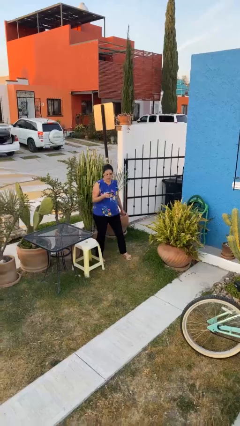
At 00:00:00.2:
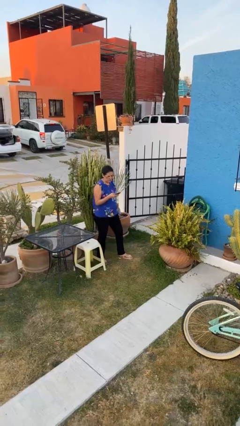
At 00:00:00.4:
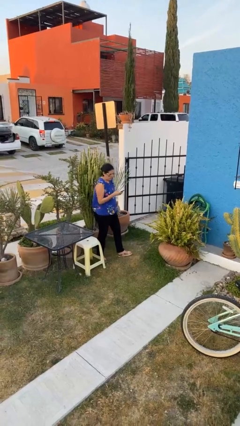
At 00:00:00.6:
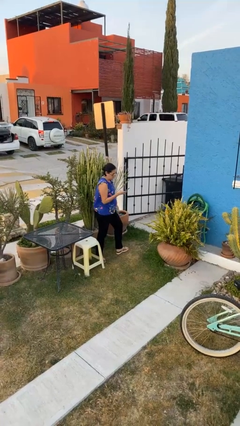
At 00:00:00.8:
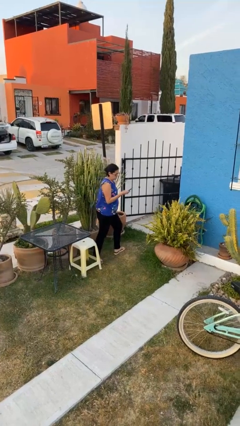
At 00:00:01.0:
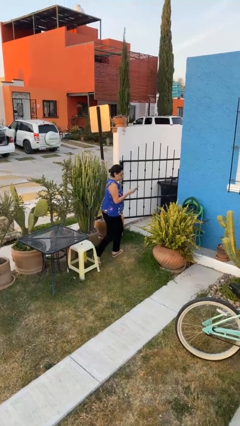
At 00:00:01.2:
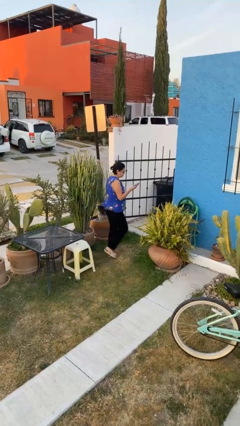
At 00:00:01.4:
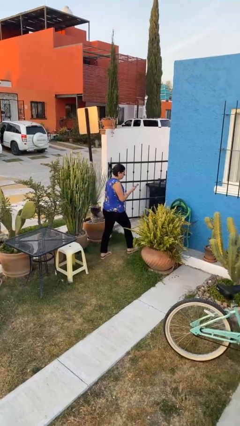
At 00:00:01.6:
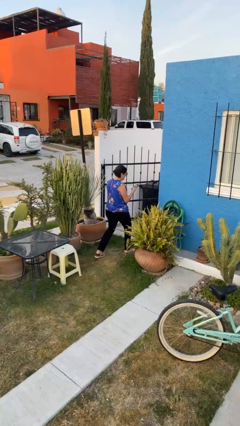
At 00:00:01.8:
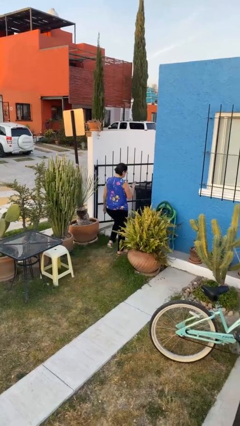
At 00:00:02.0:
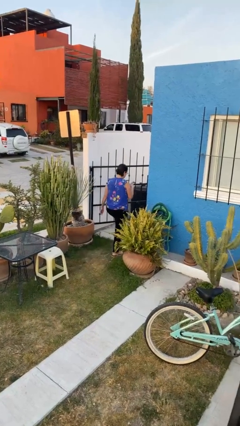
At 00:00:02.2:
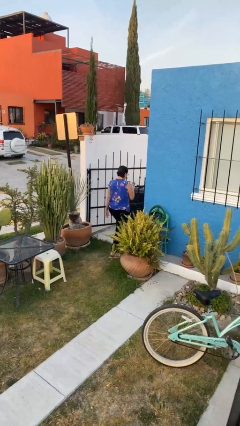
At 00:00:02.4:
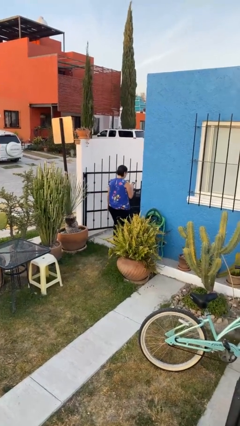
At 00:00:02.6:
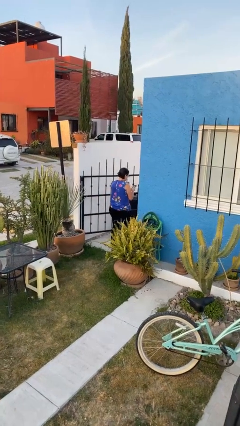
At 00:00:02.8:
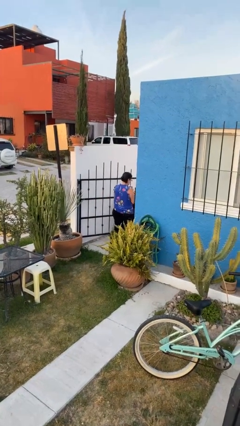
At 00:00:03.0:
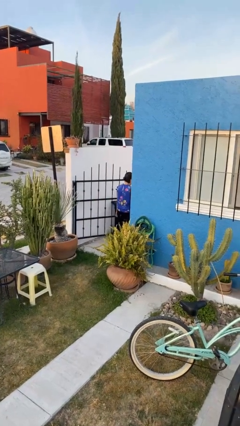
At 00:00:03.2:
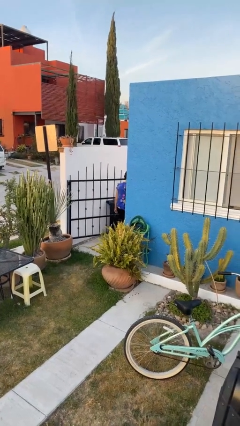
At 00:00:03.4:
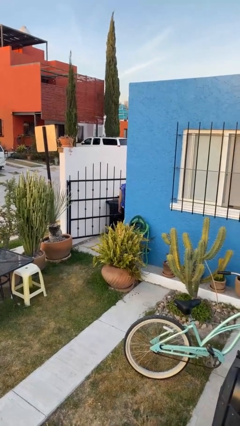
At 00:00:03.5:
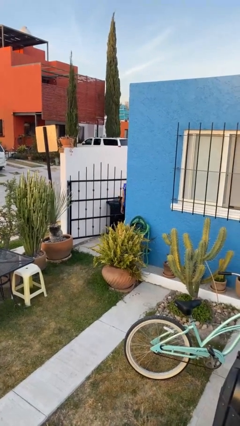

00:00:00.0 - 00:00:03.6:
person exits scene through structure

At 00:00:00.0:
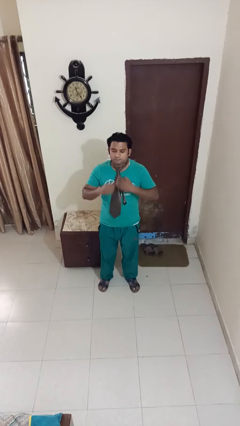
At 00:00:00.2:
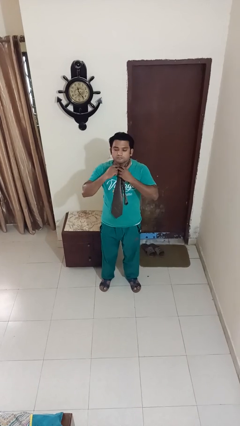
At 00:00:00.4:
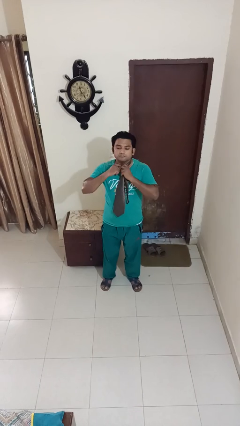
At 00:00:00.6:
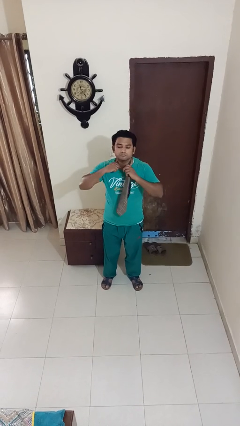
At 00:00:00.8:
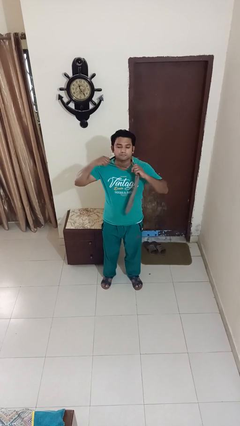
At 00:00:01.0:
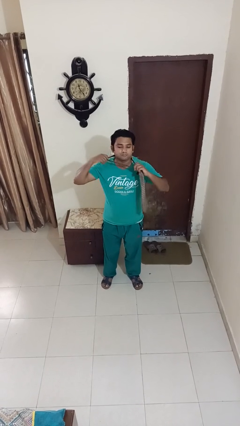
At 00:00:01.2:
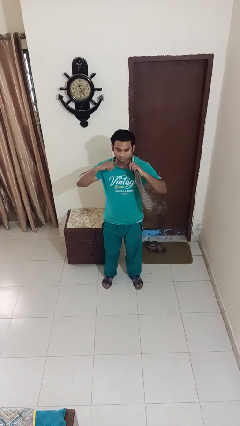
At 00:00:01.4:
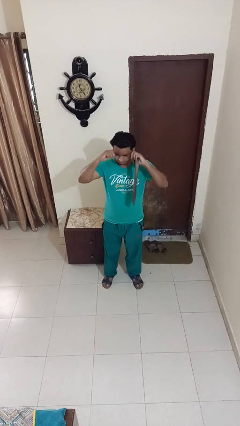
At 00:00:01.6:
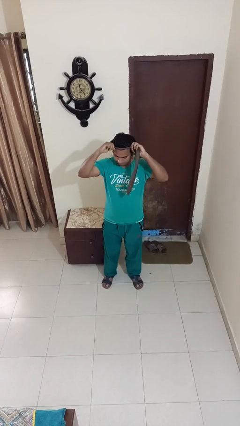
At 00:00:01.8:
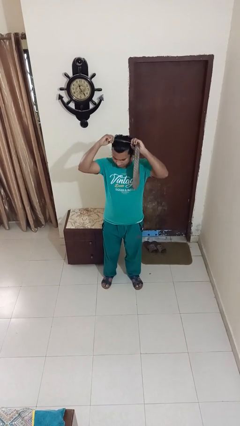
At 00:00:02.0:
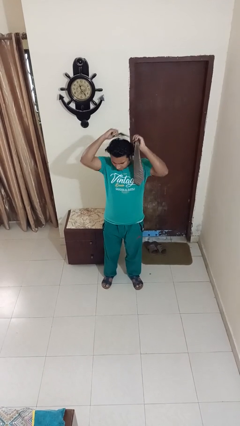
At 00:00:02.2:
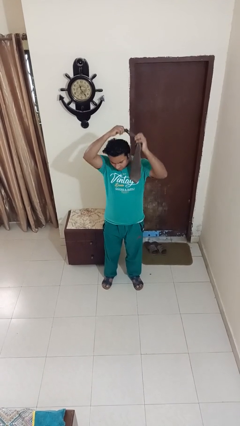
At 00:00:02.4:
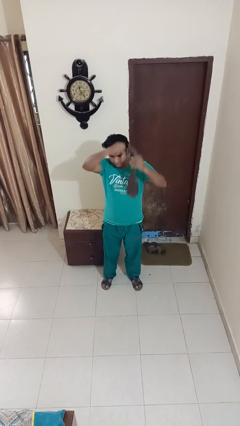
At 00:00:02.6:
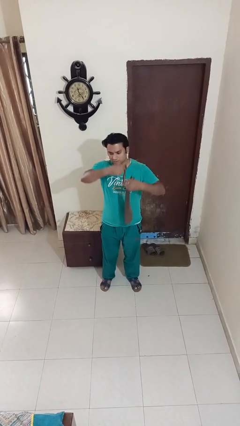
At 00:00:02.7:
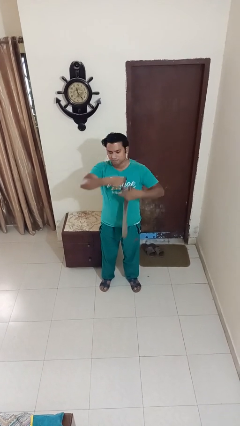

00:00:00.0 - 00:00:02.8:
person takes off necktie

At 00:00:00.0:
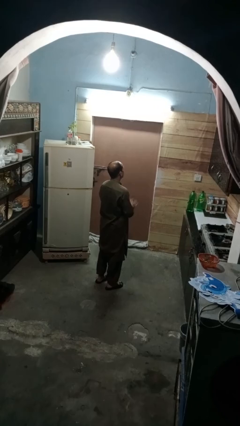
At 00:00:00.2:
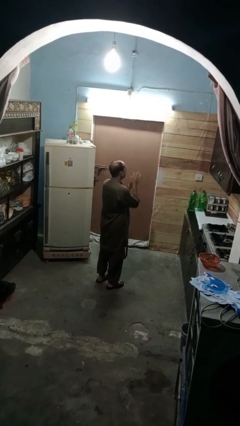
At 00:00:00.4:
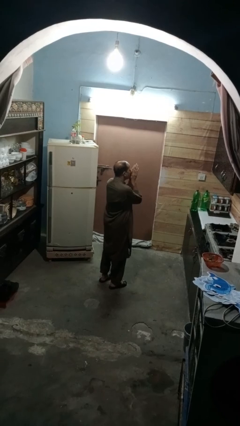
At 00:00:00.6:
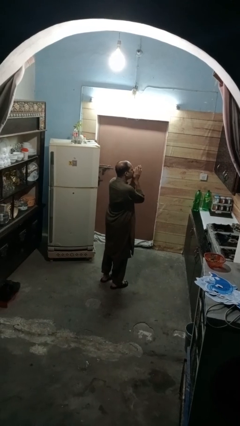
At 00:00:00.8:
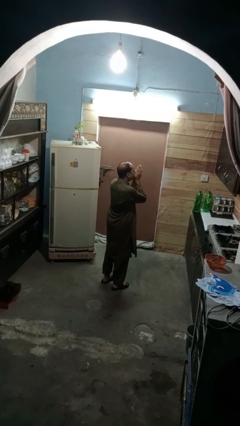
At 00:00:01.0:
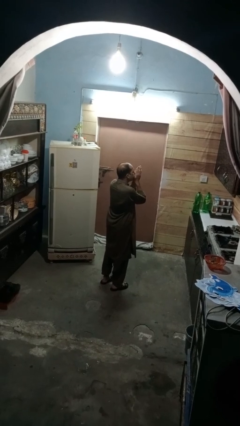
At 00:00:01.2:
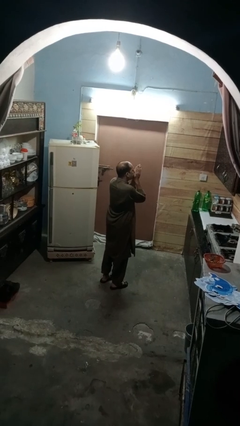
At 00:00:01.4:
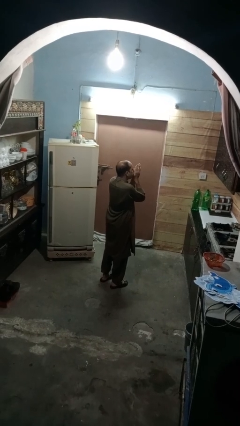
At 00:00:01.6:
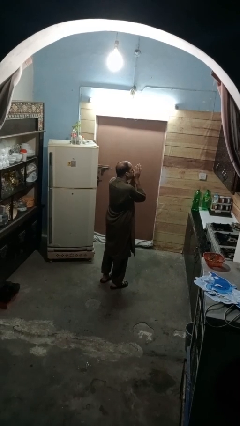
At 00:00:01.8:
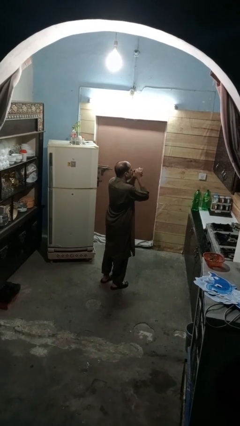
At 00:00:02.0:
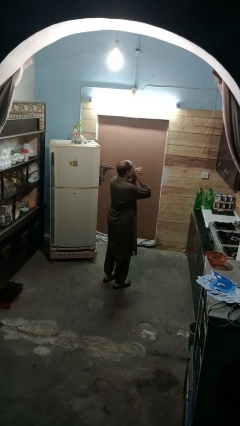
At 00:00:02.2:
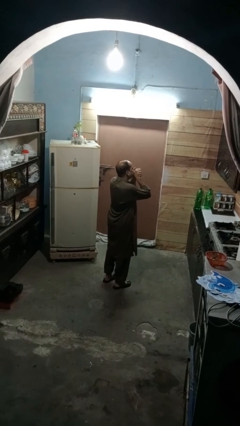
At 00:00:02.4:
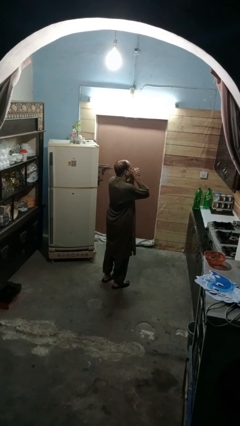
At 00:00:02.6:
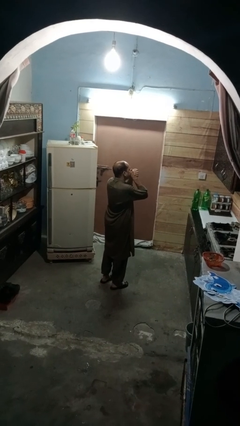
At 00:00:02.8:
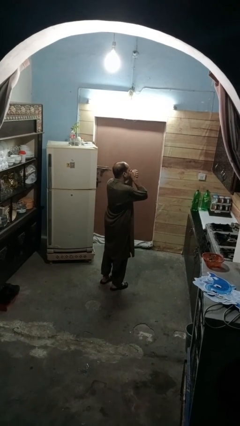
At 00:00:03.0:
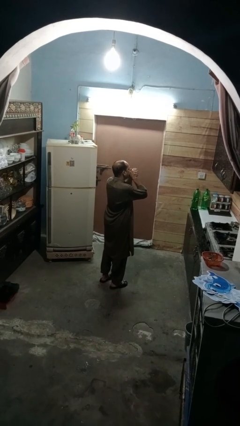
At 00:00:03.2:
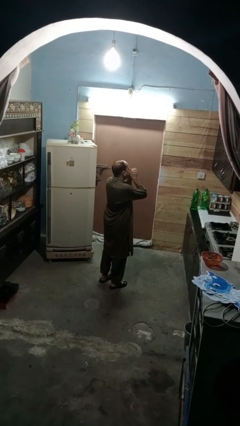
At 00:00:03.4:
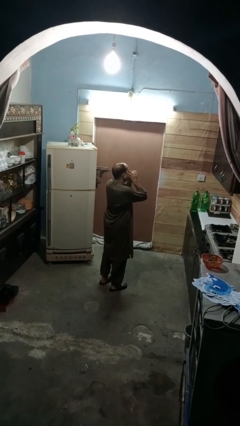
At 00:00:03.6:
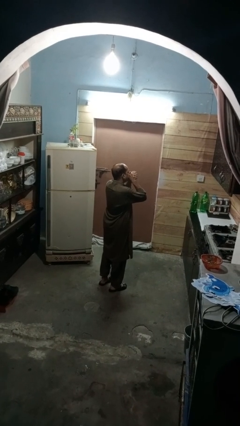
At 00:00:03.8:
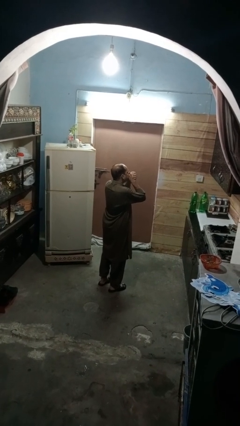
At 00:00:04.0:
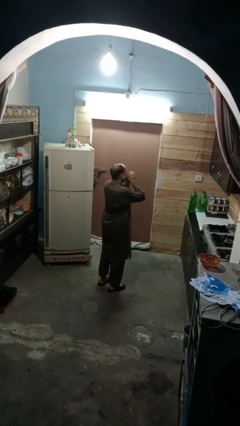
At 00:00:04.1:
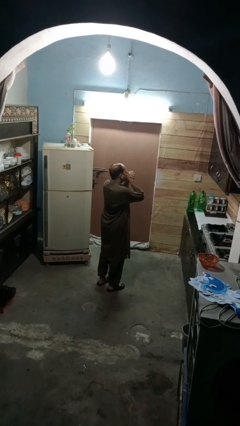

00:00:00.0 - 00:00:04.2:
person blows into hands

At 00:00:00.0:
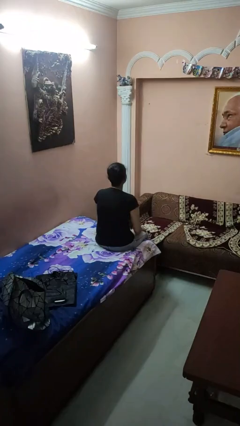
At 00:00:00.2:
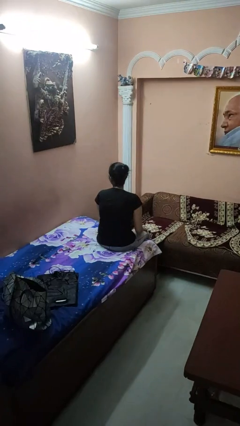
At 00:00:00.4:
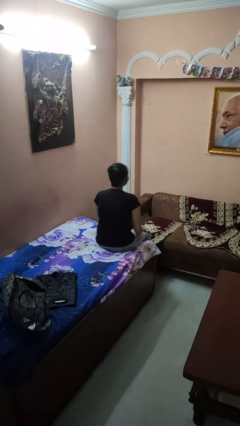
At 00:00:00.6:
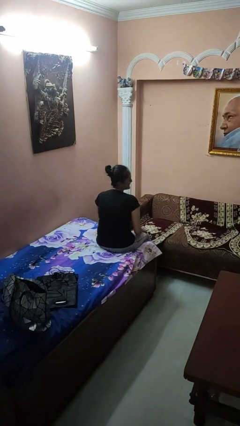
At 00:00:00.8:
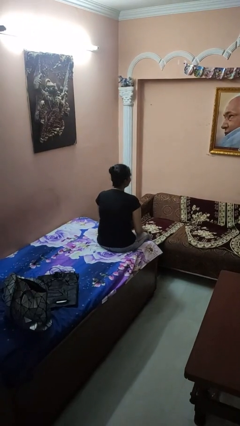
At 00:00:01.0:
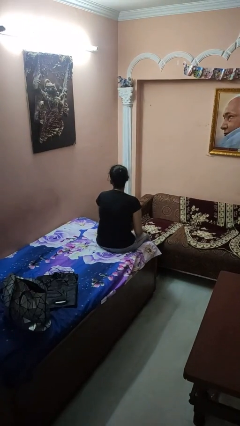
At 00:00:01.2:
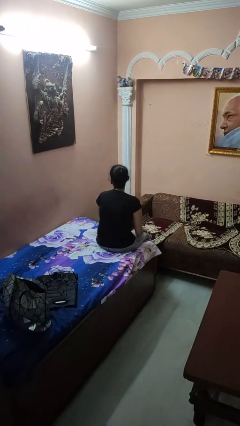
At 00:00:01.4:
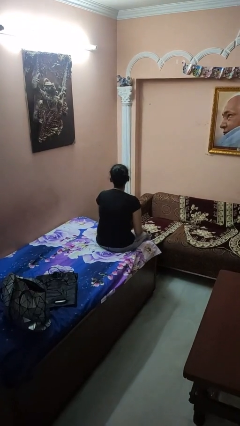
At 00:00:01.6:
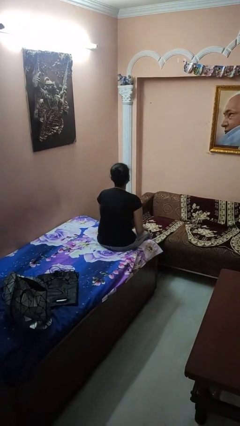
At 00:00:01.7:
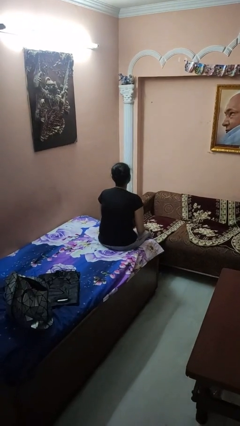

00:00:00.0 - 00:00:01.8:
person shakes head

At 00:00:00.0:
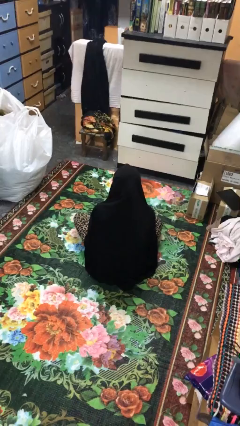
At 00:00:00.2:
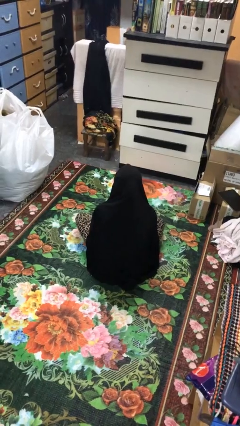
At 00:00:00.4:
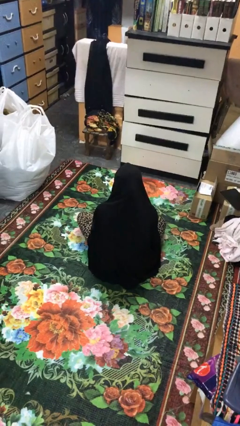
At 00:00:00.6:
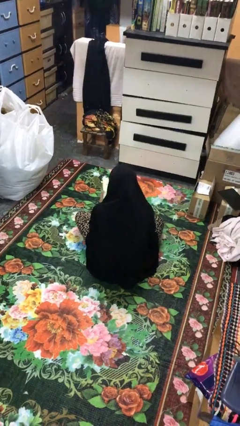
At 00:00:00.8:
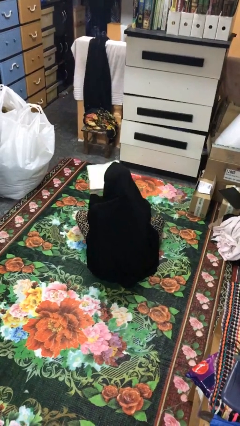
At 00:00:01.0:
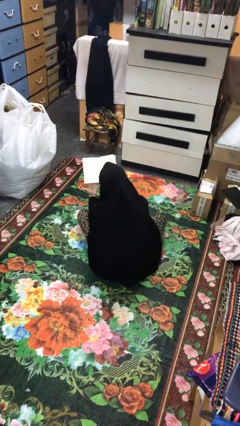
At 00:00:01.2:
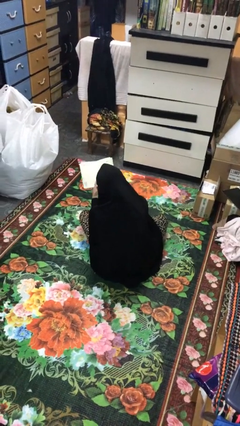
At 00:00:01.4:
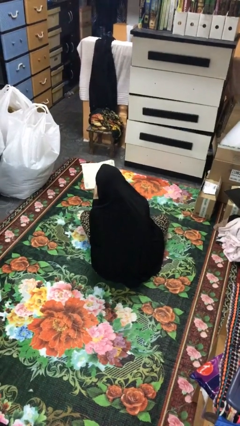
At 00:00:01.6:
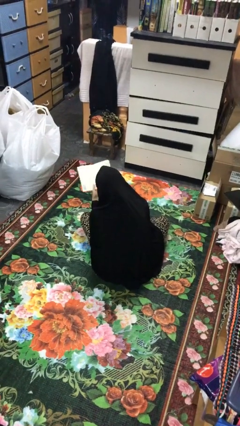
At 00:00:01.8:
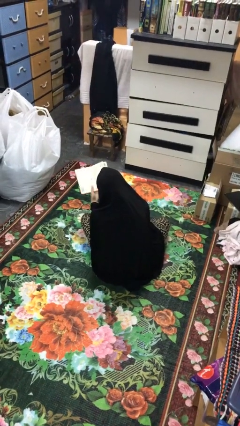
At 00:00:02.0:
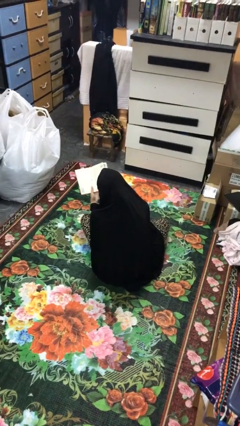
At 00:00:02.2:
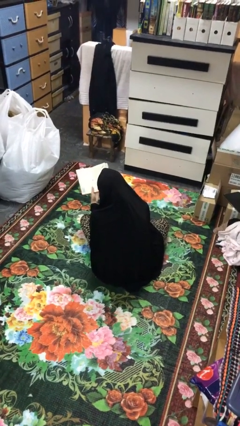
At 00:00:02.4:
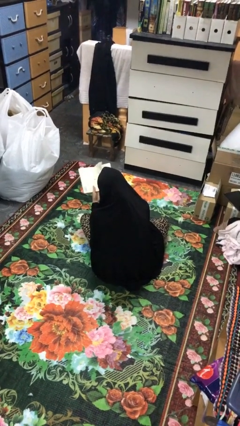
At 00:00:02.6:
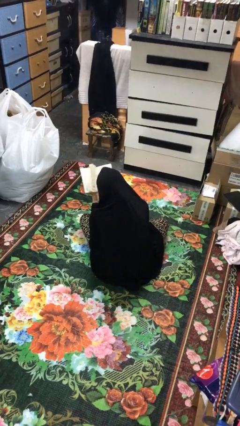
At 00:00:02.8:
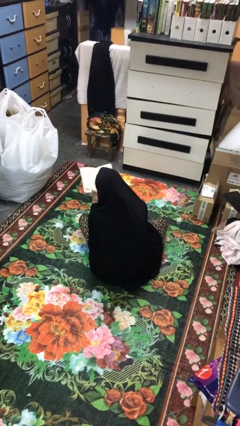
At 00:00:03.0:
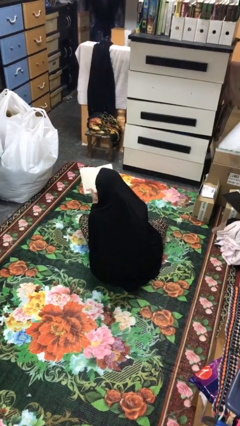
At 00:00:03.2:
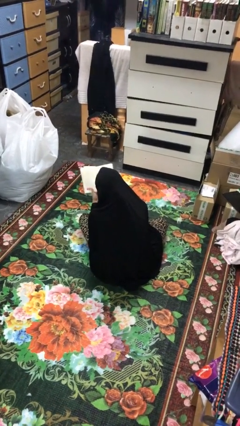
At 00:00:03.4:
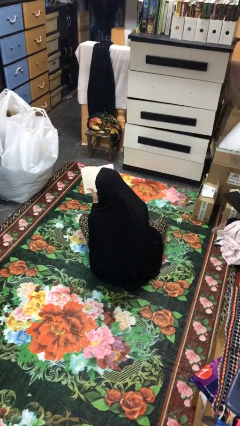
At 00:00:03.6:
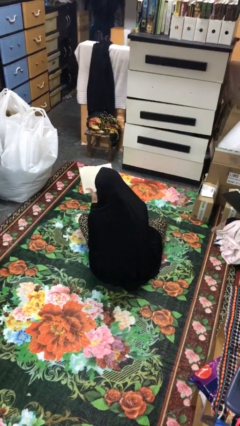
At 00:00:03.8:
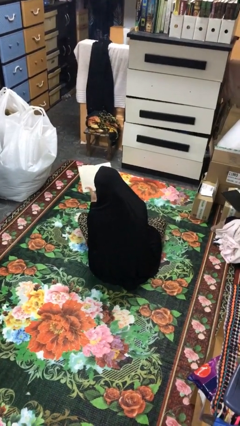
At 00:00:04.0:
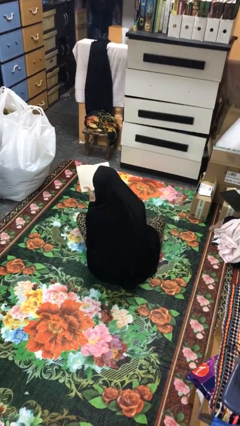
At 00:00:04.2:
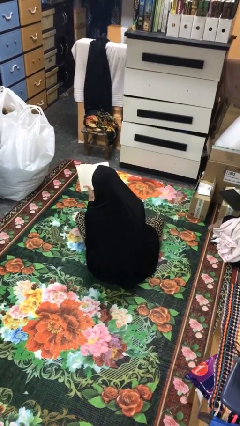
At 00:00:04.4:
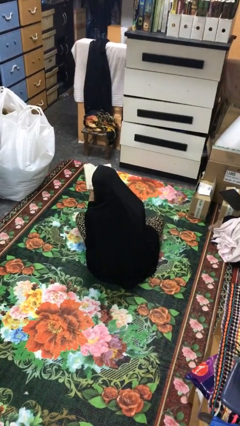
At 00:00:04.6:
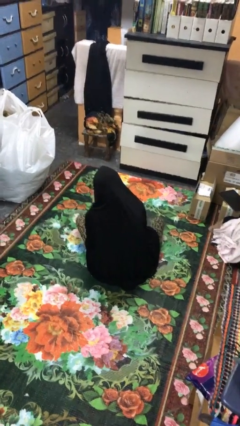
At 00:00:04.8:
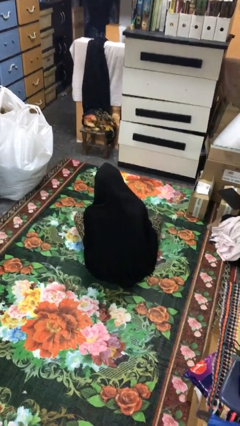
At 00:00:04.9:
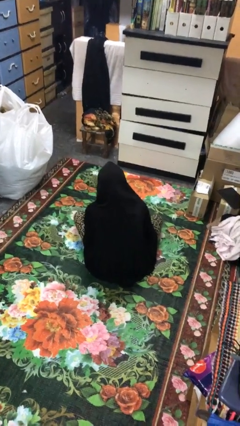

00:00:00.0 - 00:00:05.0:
person reads book
